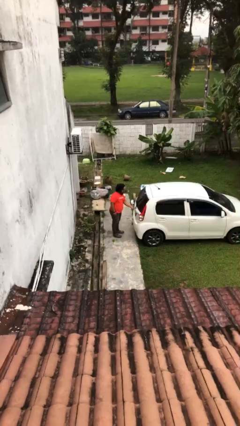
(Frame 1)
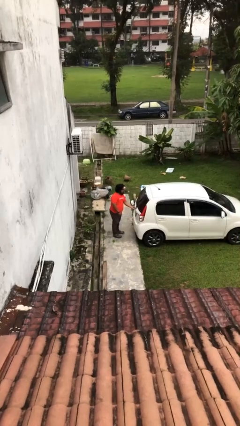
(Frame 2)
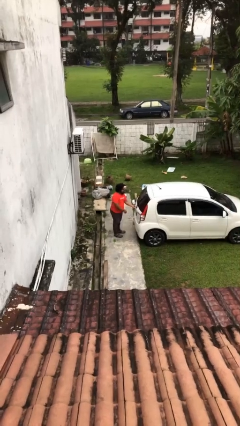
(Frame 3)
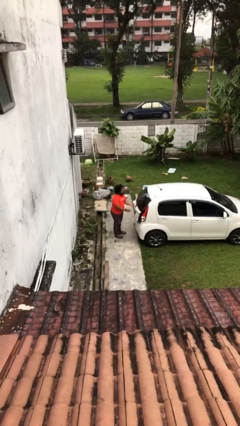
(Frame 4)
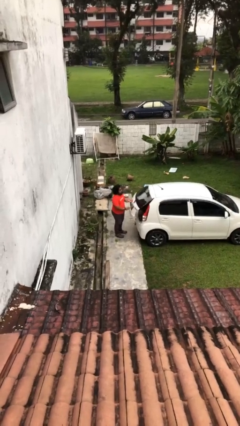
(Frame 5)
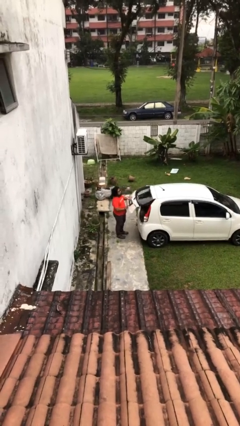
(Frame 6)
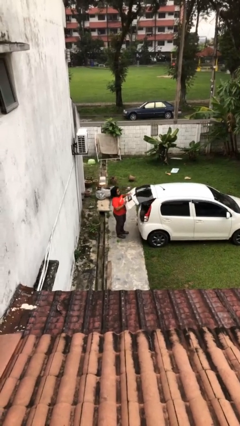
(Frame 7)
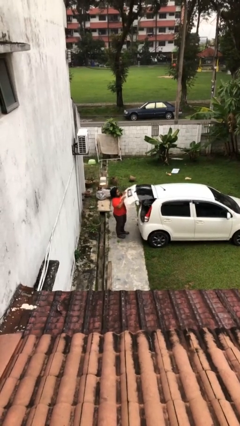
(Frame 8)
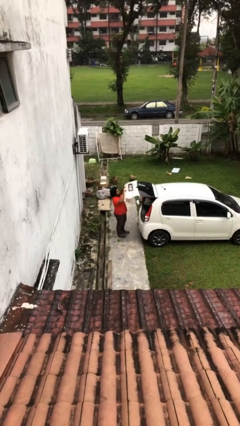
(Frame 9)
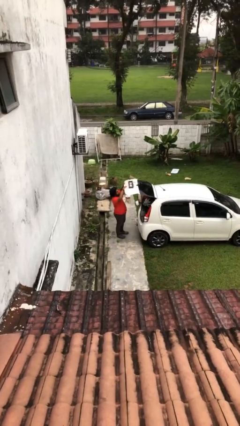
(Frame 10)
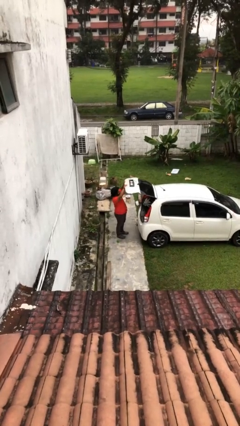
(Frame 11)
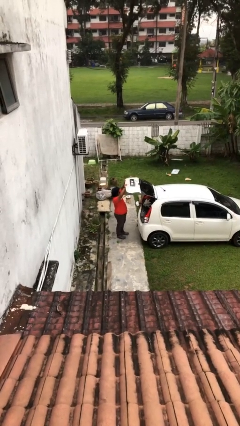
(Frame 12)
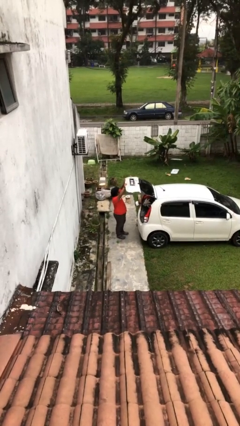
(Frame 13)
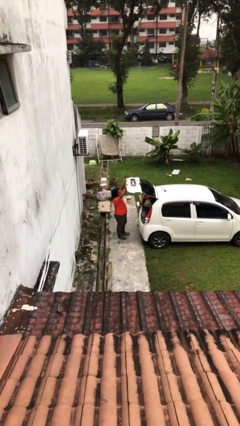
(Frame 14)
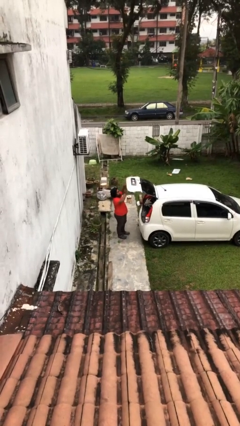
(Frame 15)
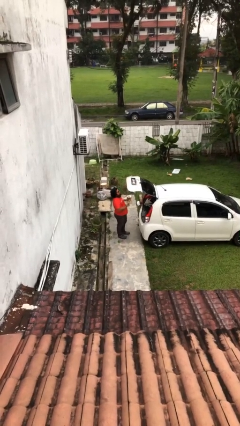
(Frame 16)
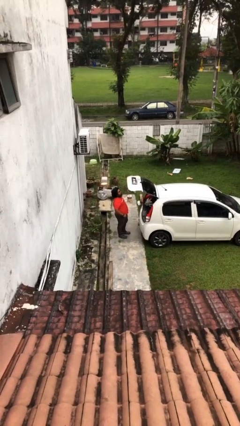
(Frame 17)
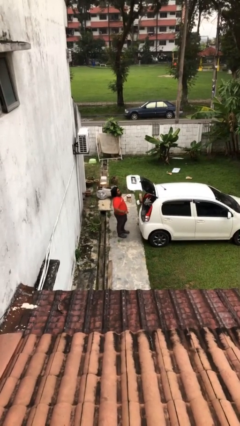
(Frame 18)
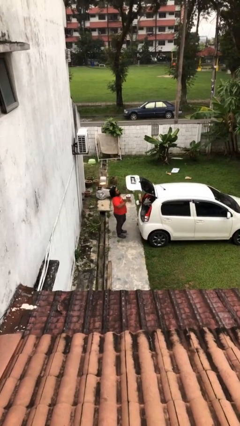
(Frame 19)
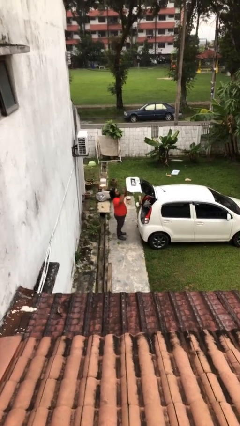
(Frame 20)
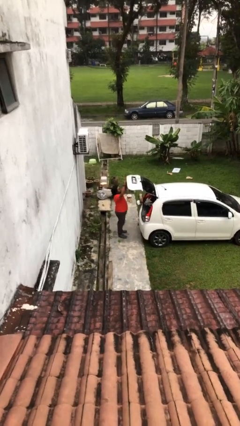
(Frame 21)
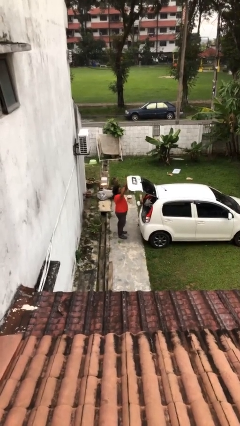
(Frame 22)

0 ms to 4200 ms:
person opens car trunk

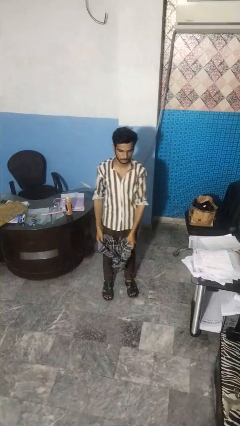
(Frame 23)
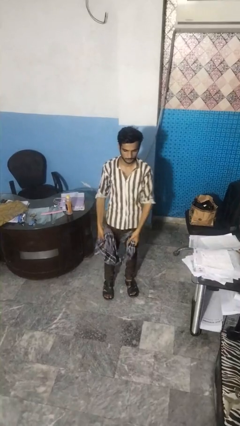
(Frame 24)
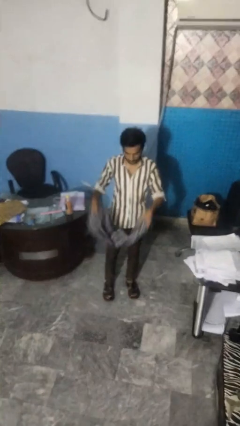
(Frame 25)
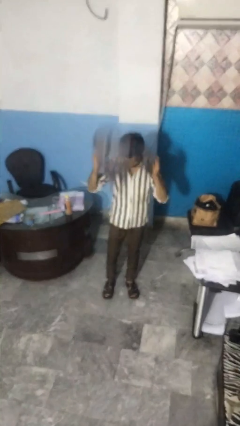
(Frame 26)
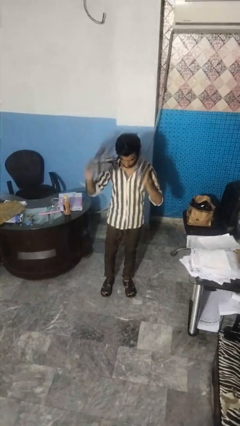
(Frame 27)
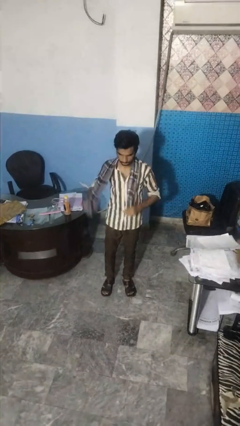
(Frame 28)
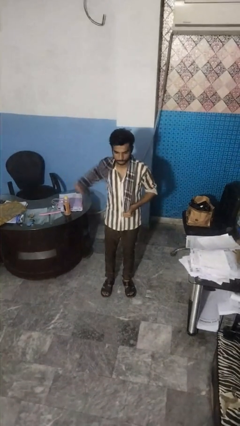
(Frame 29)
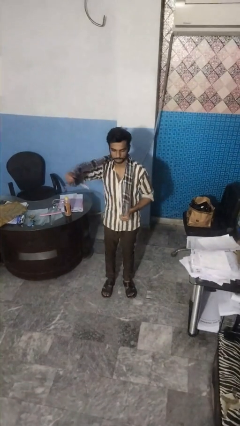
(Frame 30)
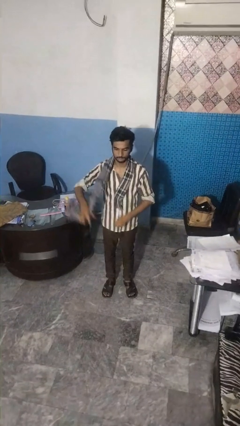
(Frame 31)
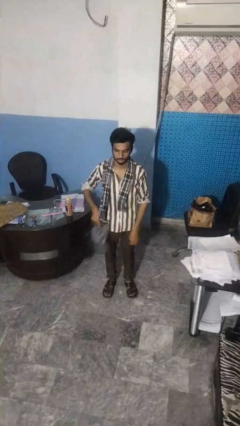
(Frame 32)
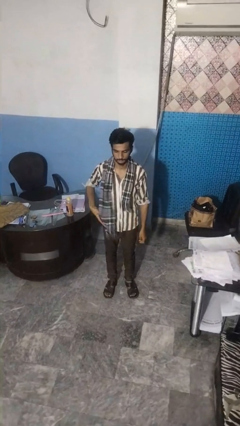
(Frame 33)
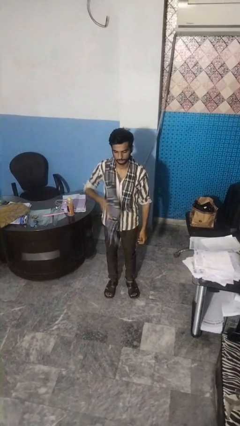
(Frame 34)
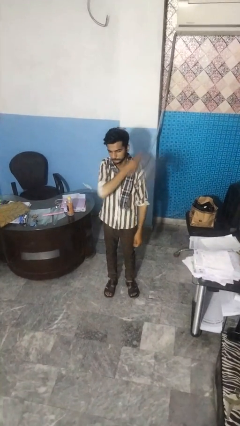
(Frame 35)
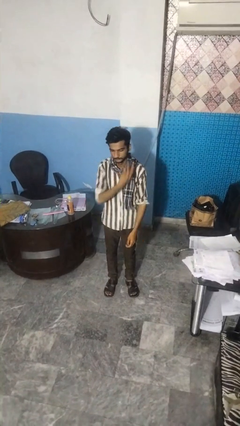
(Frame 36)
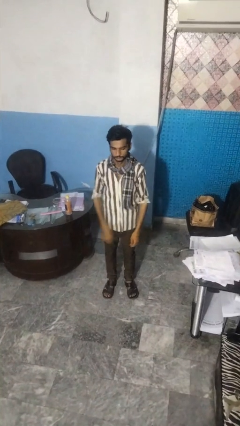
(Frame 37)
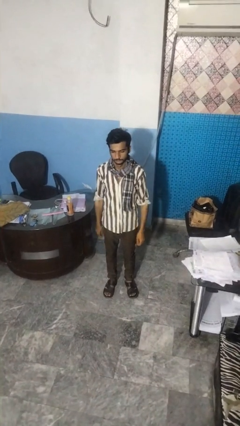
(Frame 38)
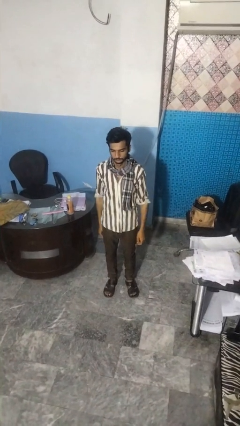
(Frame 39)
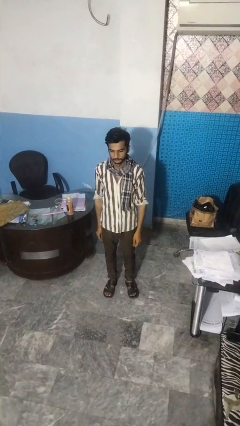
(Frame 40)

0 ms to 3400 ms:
person puts on scarf

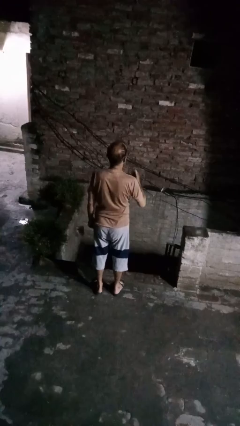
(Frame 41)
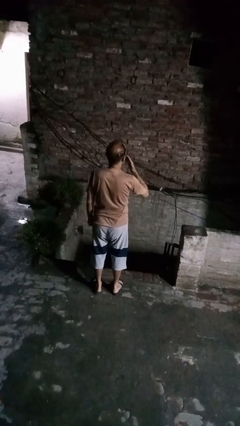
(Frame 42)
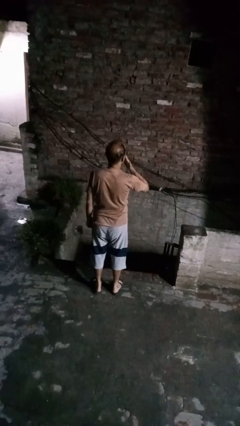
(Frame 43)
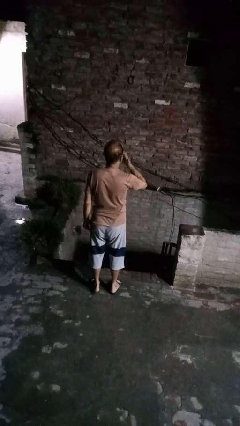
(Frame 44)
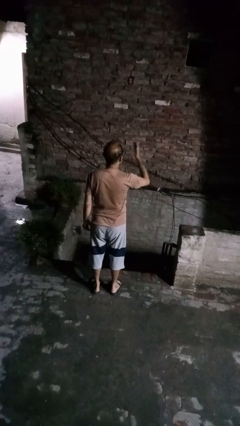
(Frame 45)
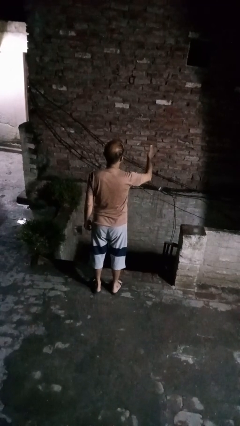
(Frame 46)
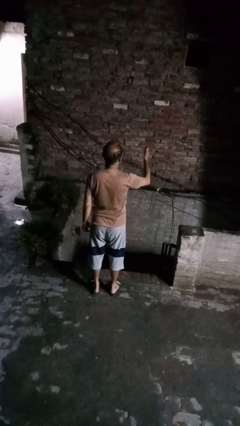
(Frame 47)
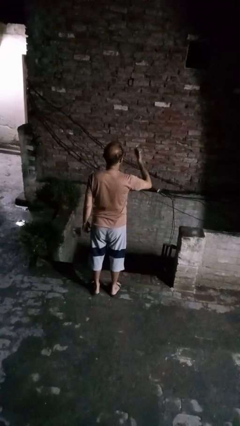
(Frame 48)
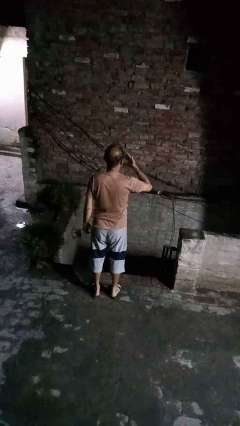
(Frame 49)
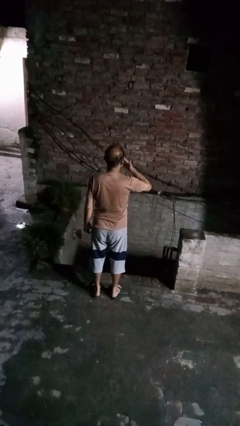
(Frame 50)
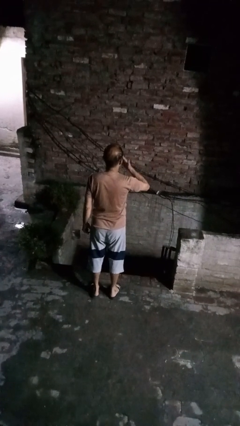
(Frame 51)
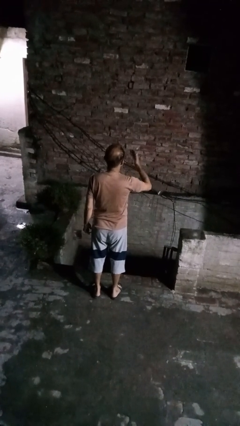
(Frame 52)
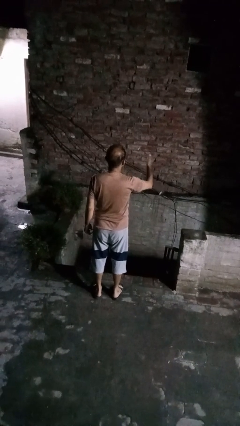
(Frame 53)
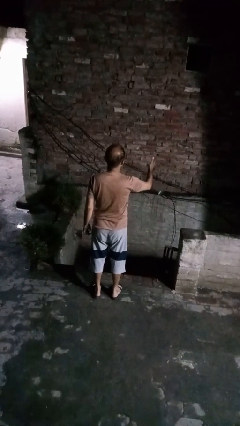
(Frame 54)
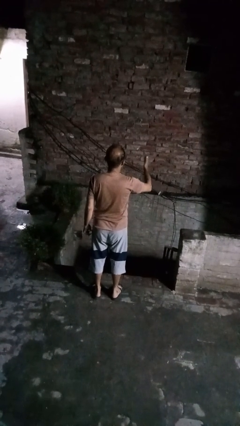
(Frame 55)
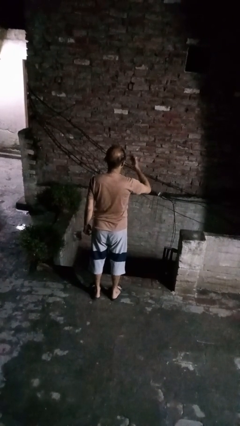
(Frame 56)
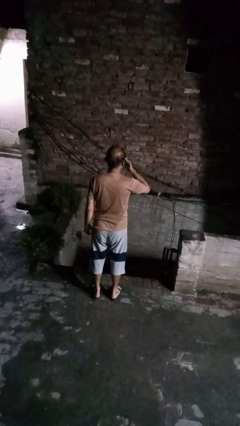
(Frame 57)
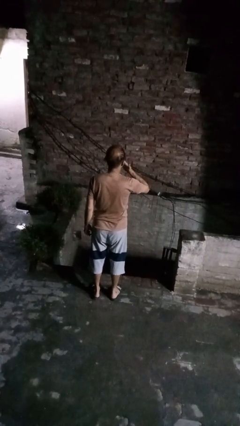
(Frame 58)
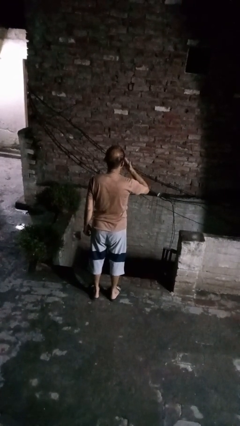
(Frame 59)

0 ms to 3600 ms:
person gestures blow kiss

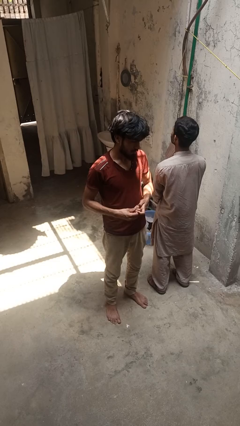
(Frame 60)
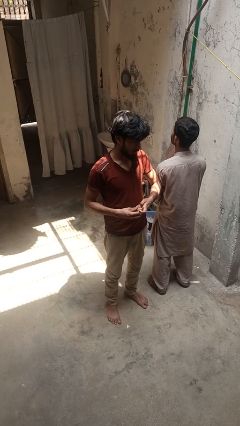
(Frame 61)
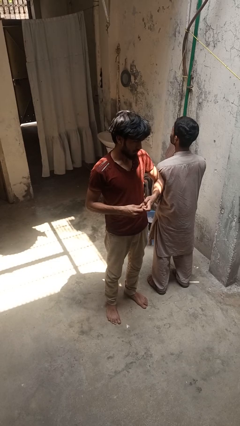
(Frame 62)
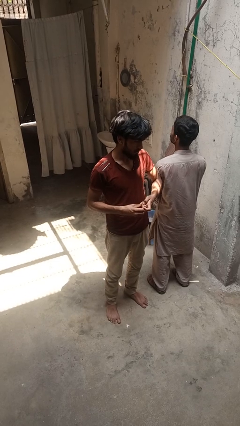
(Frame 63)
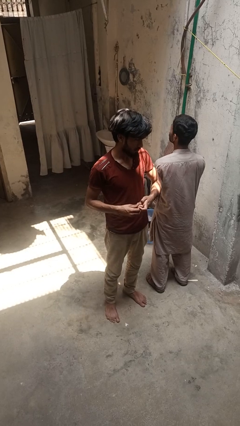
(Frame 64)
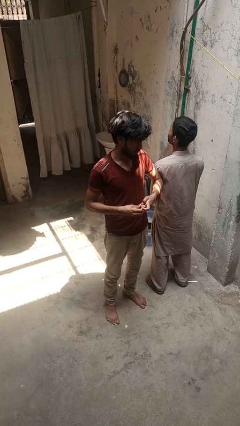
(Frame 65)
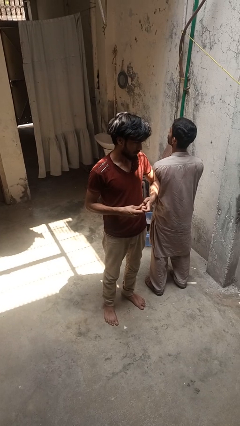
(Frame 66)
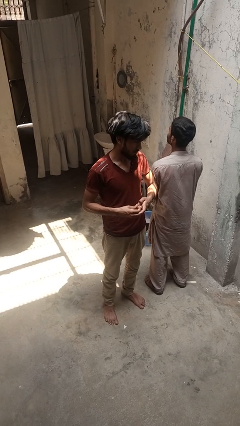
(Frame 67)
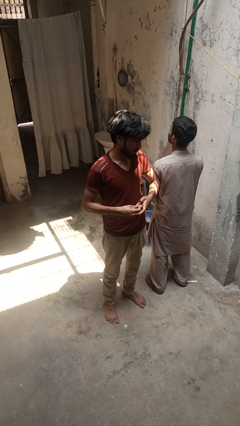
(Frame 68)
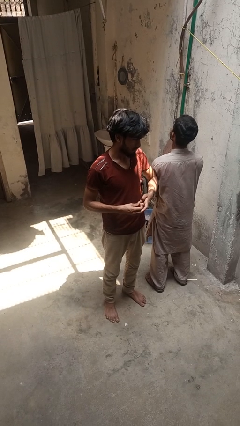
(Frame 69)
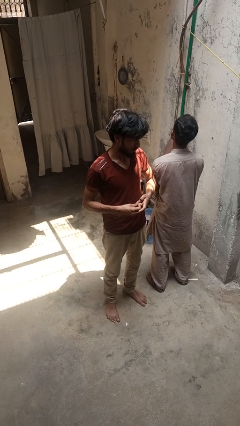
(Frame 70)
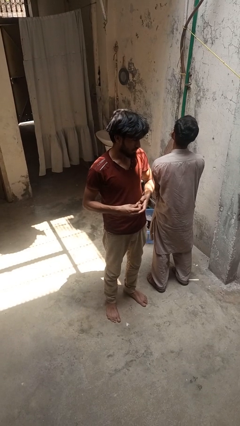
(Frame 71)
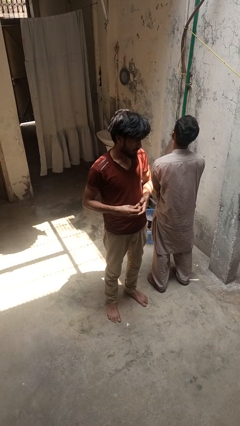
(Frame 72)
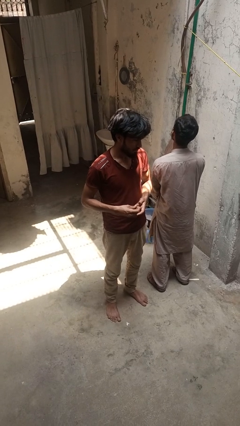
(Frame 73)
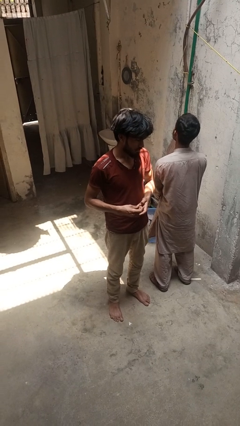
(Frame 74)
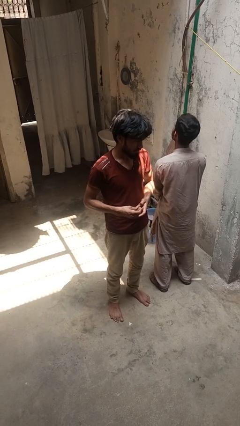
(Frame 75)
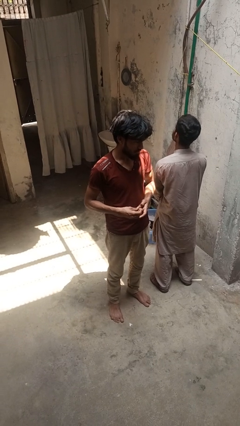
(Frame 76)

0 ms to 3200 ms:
person nudges person with elbow

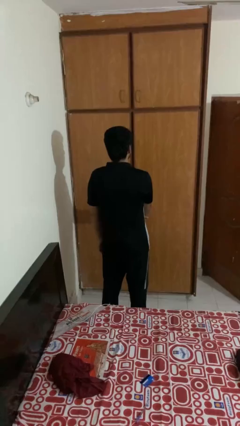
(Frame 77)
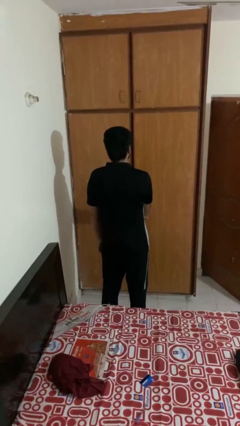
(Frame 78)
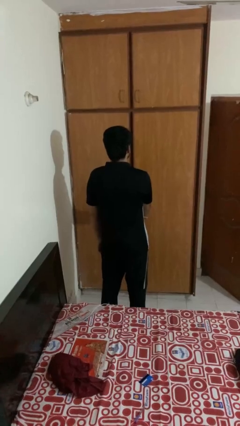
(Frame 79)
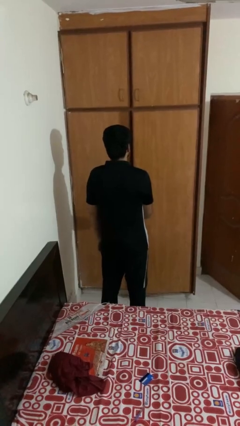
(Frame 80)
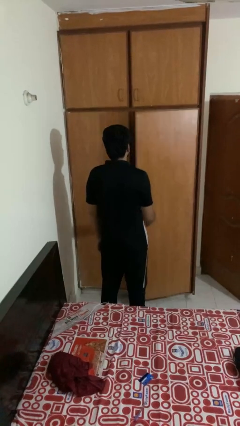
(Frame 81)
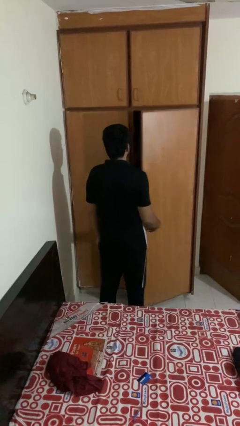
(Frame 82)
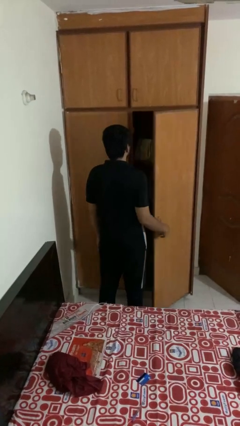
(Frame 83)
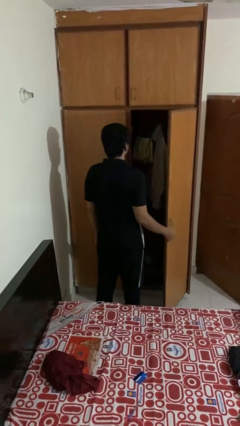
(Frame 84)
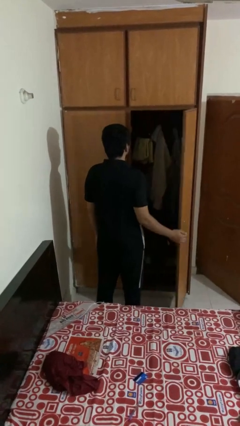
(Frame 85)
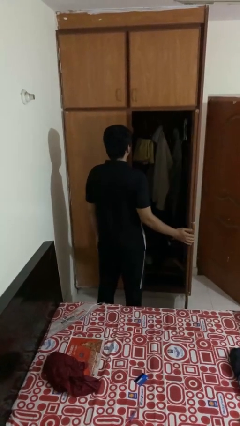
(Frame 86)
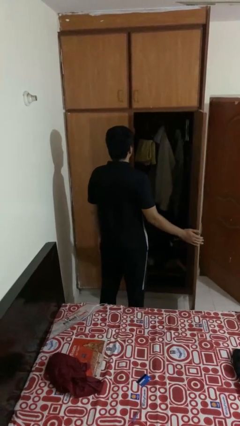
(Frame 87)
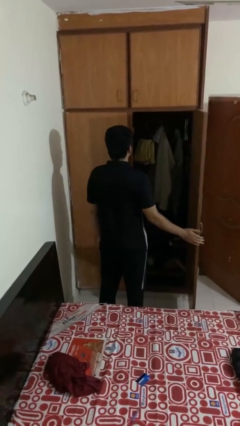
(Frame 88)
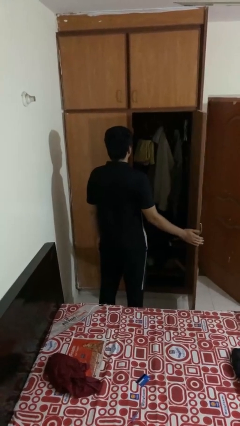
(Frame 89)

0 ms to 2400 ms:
person opens closet door

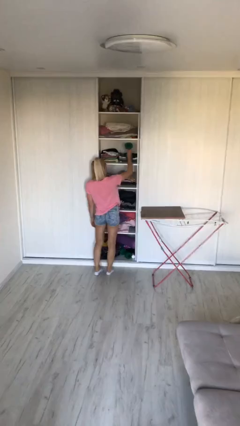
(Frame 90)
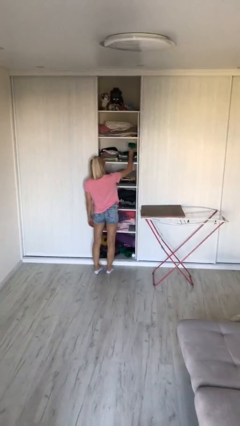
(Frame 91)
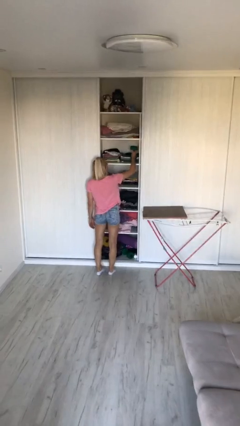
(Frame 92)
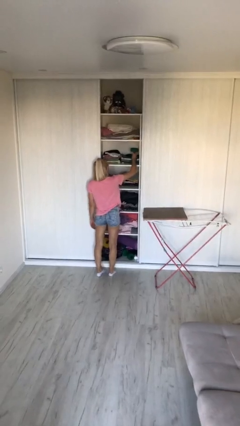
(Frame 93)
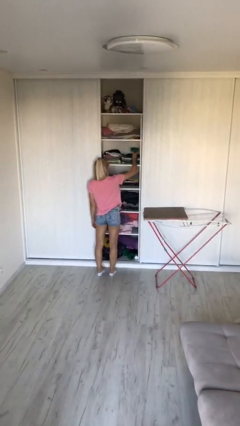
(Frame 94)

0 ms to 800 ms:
person puts down object on shelf

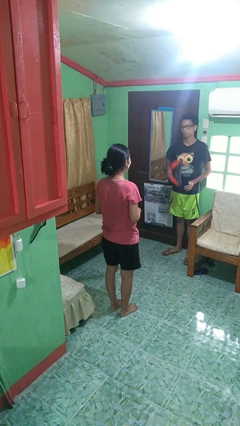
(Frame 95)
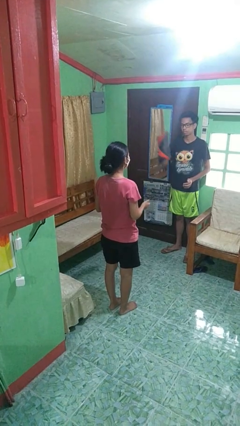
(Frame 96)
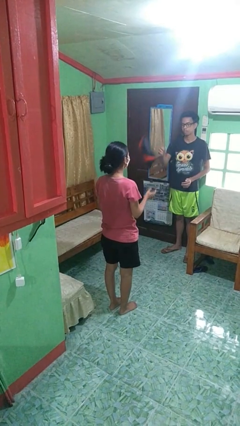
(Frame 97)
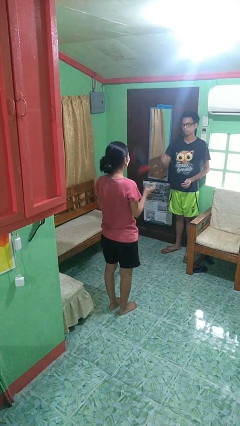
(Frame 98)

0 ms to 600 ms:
person catches object from person
